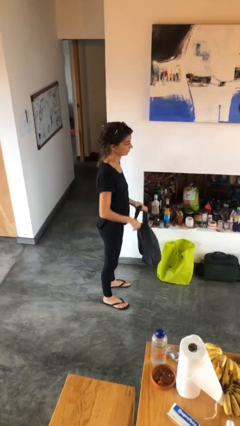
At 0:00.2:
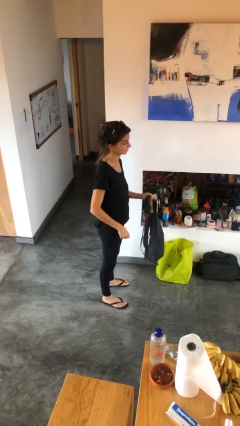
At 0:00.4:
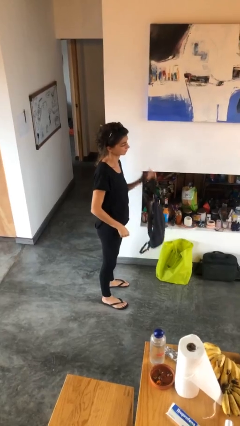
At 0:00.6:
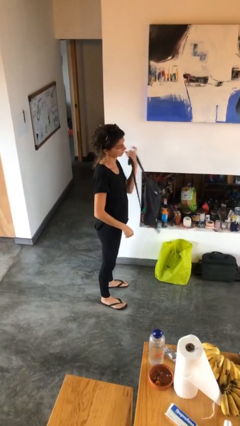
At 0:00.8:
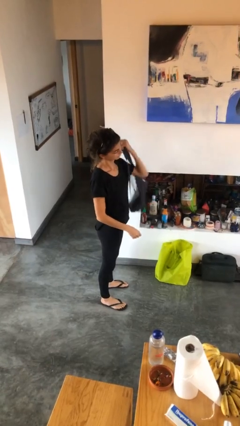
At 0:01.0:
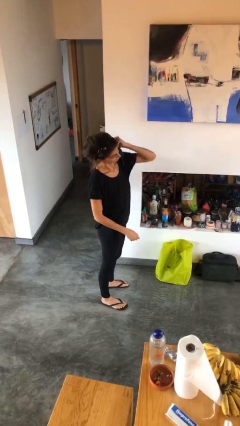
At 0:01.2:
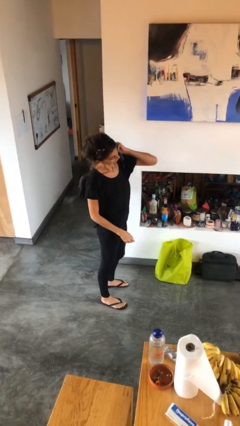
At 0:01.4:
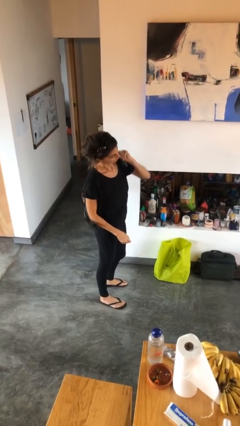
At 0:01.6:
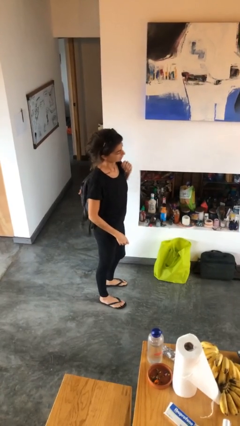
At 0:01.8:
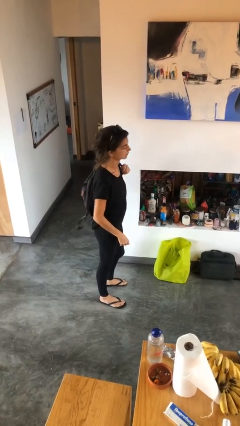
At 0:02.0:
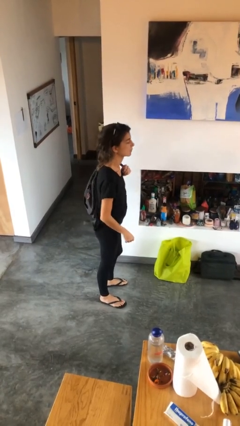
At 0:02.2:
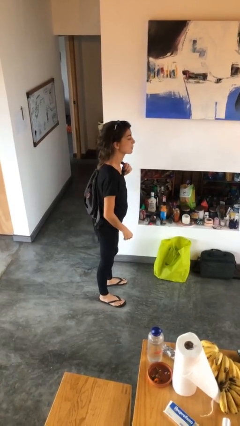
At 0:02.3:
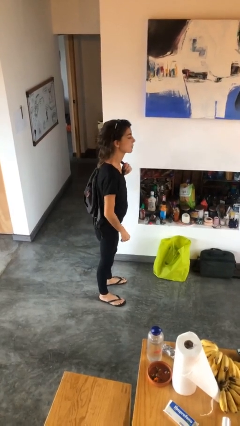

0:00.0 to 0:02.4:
person puts on backpack

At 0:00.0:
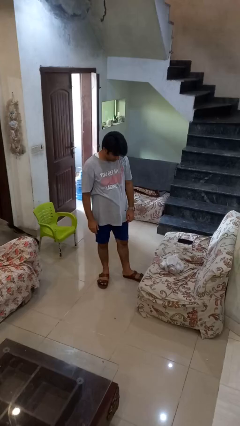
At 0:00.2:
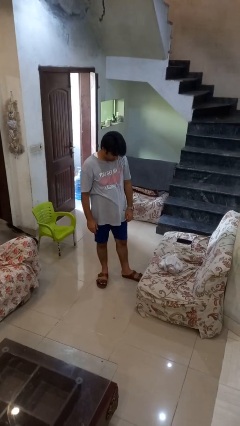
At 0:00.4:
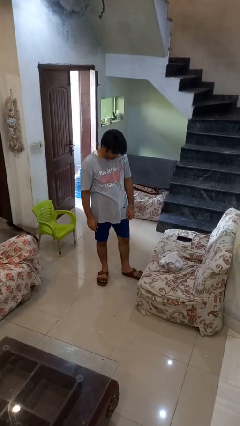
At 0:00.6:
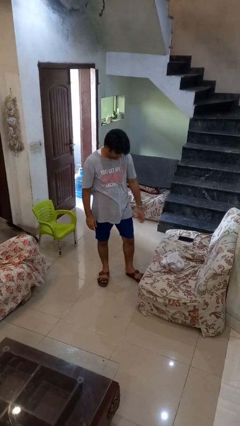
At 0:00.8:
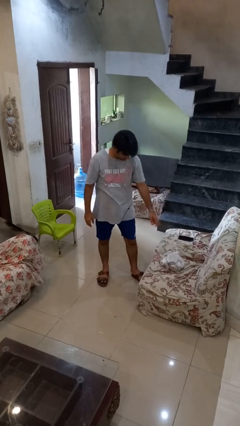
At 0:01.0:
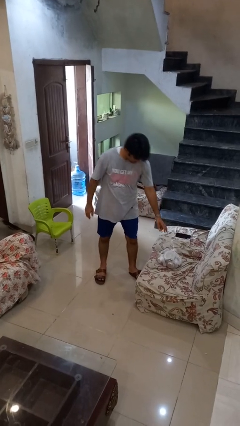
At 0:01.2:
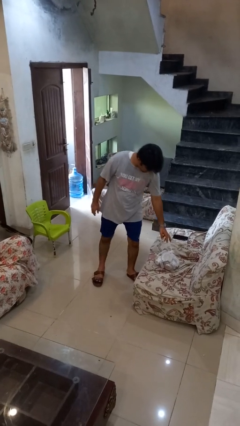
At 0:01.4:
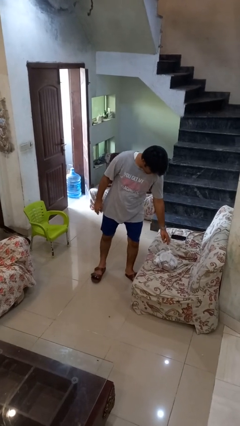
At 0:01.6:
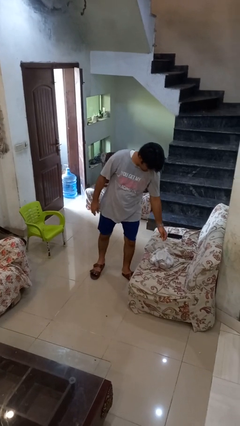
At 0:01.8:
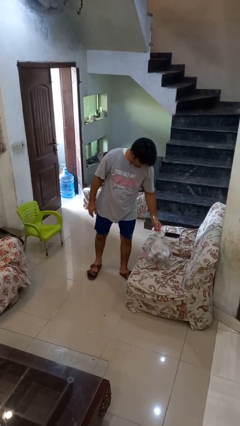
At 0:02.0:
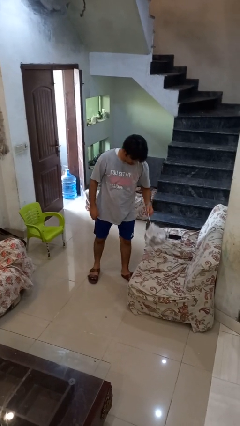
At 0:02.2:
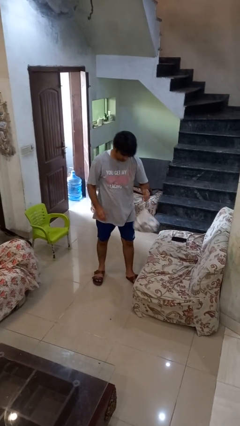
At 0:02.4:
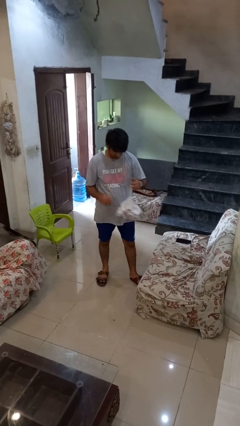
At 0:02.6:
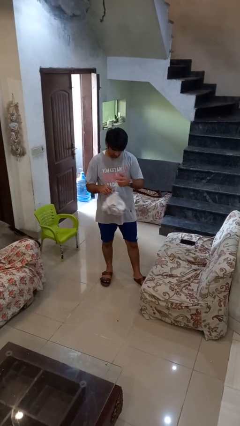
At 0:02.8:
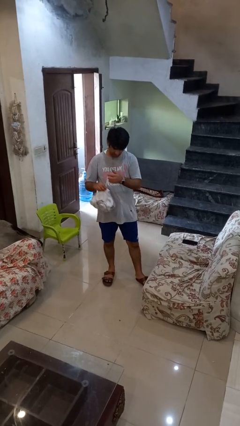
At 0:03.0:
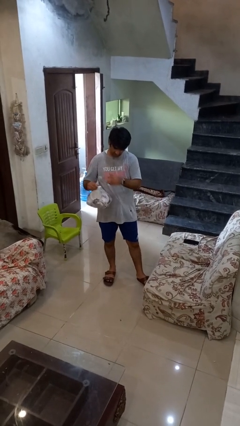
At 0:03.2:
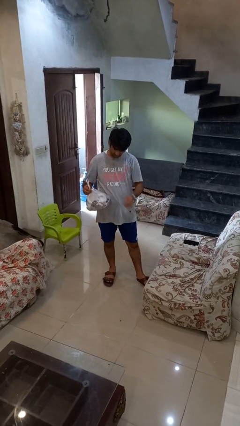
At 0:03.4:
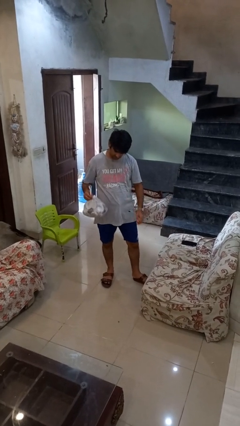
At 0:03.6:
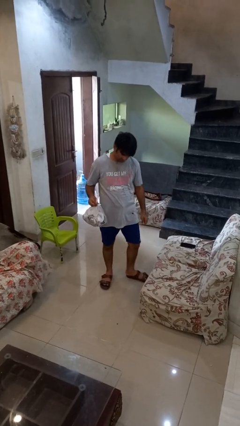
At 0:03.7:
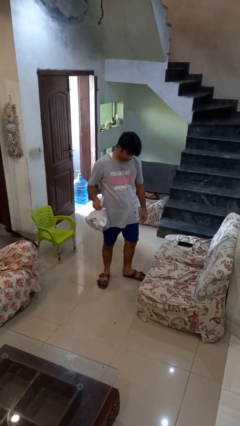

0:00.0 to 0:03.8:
person picks up object from couch

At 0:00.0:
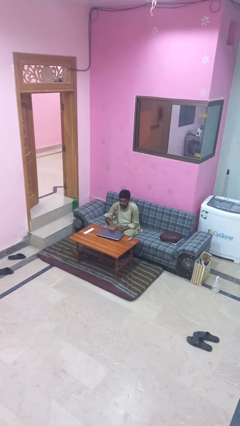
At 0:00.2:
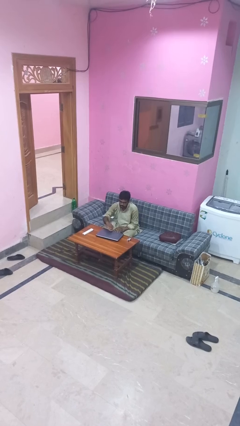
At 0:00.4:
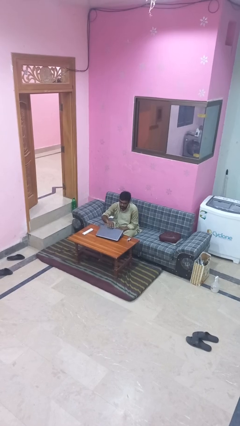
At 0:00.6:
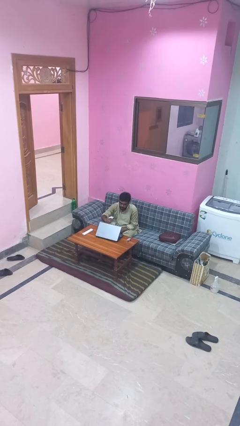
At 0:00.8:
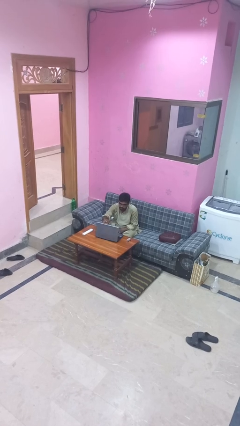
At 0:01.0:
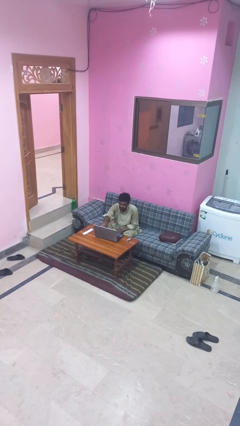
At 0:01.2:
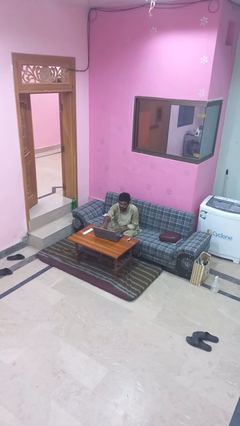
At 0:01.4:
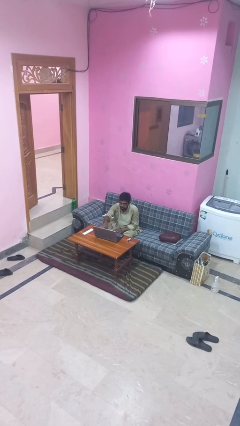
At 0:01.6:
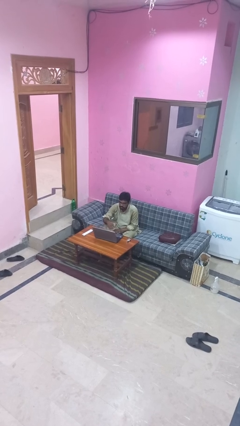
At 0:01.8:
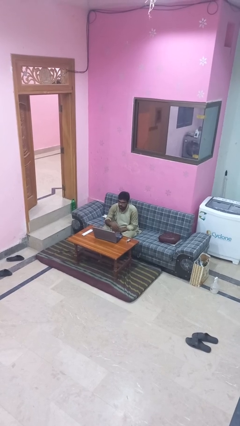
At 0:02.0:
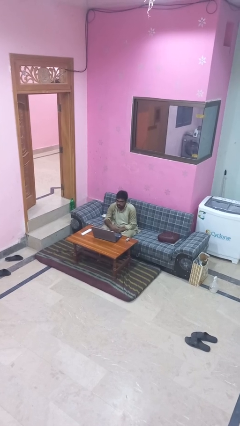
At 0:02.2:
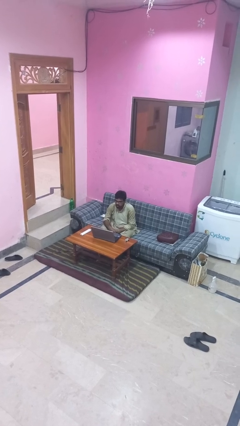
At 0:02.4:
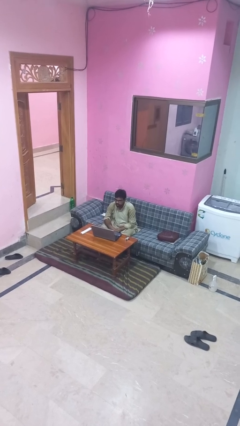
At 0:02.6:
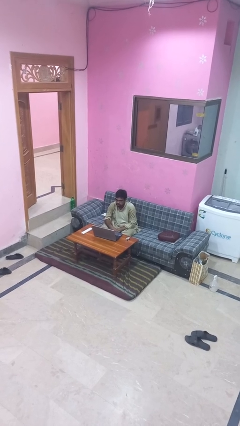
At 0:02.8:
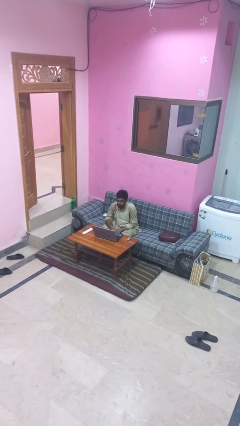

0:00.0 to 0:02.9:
person opens laptop

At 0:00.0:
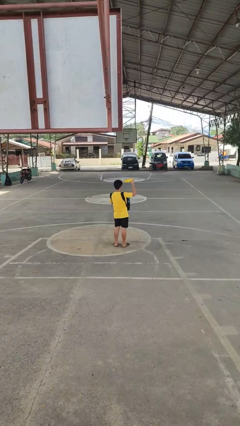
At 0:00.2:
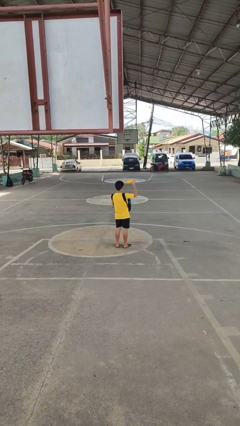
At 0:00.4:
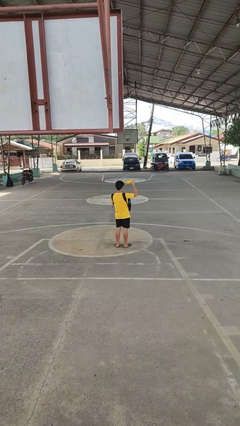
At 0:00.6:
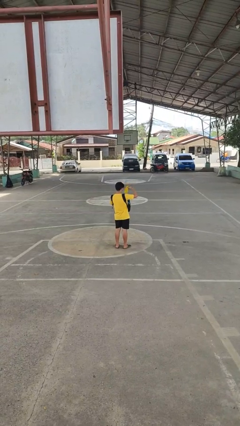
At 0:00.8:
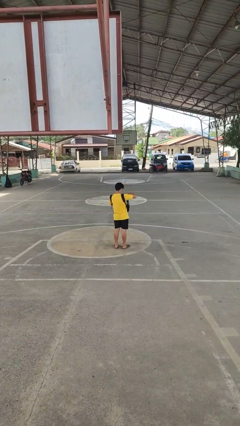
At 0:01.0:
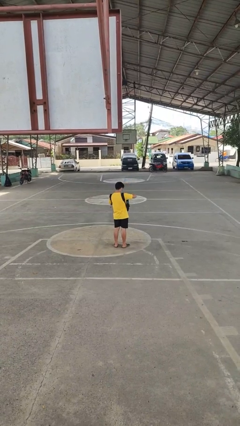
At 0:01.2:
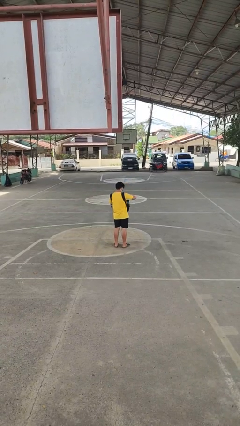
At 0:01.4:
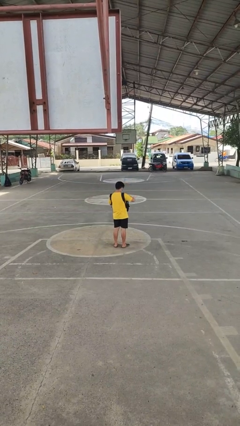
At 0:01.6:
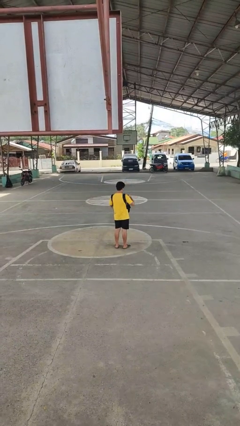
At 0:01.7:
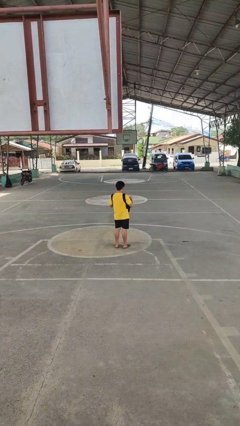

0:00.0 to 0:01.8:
person puts object into backpack

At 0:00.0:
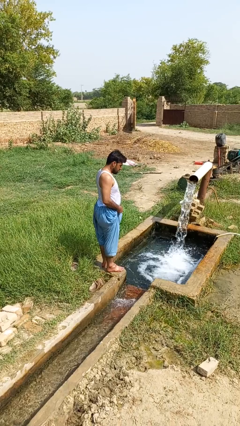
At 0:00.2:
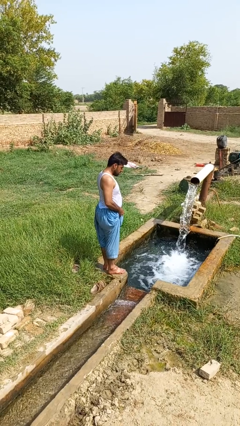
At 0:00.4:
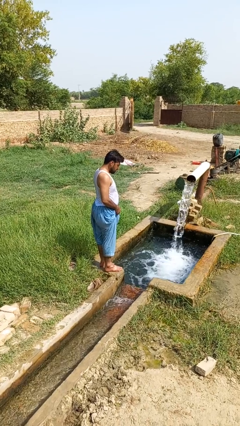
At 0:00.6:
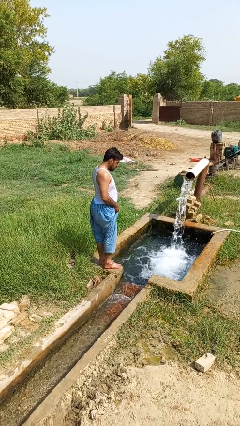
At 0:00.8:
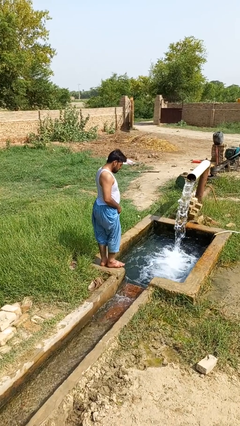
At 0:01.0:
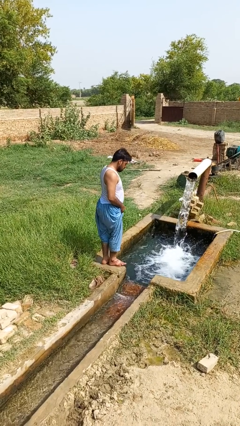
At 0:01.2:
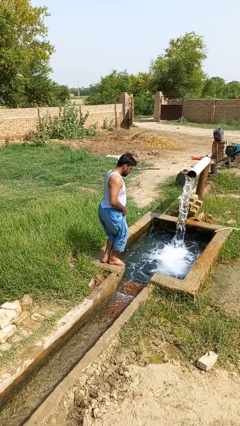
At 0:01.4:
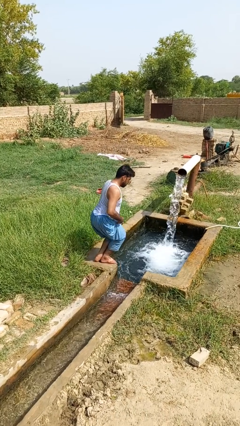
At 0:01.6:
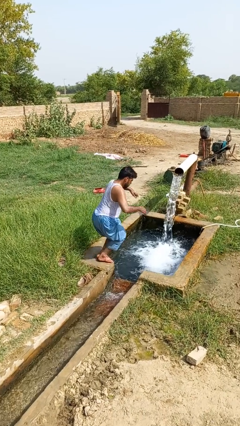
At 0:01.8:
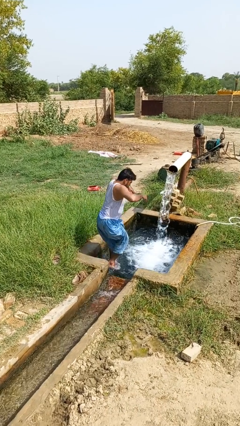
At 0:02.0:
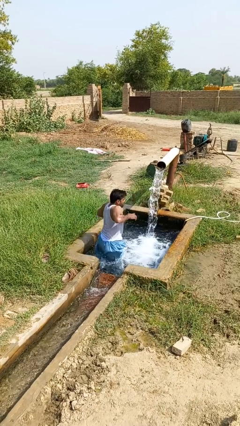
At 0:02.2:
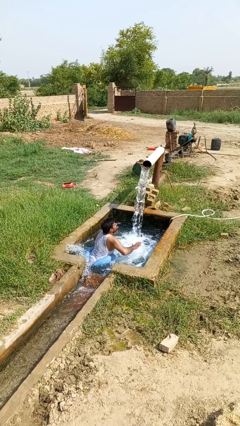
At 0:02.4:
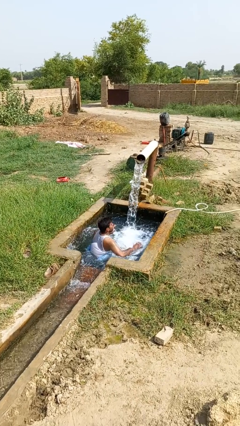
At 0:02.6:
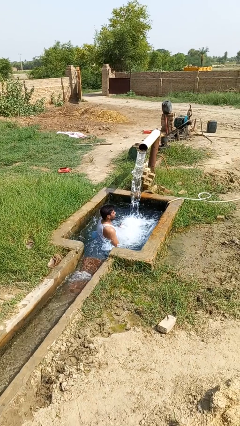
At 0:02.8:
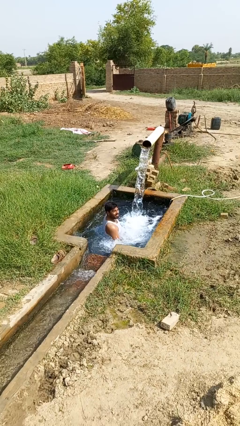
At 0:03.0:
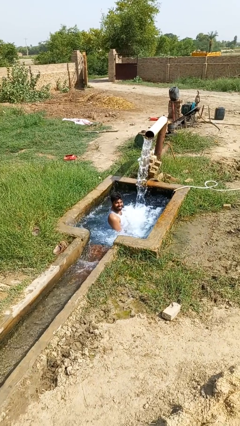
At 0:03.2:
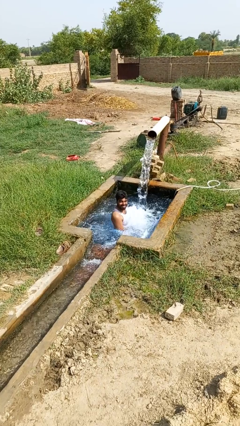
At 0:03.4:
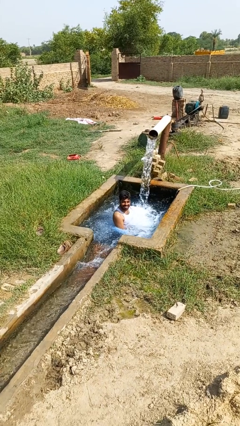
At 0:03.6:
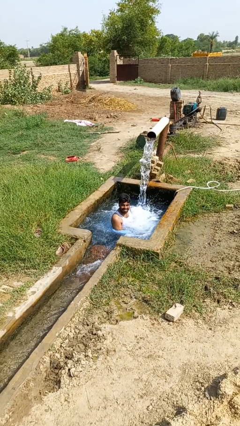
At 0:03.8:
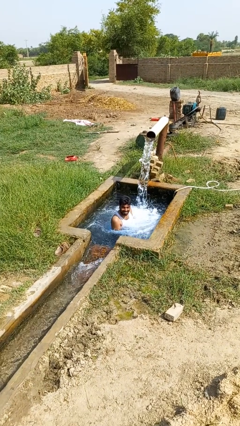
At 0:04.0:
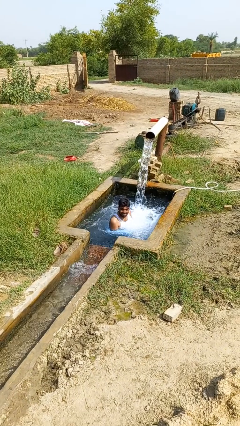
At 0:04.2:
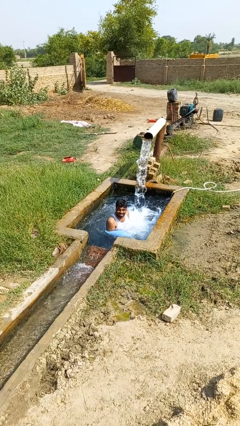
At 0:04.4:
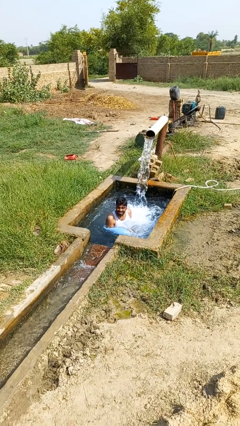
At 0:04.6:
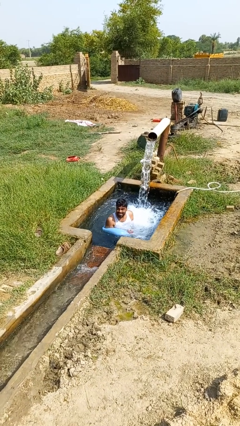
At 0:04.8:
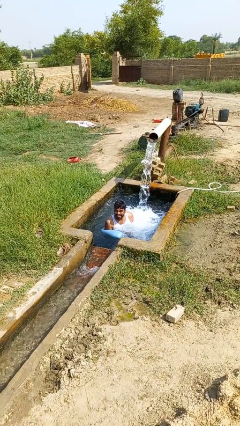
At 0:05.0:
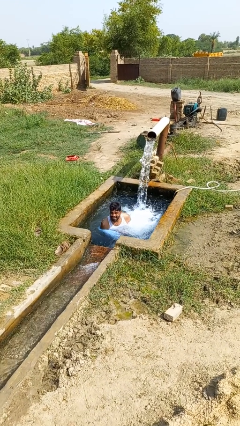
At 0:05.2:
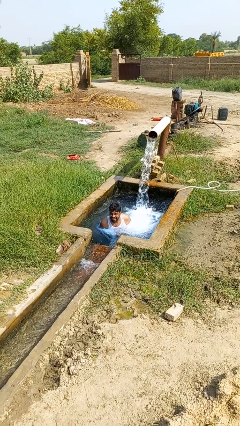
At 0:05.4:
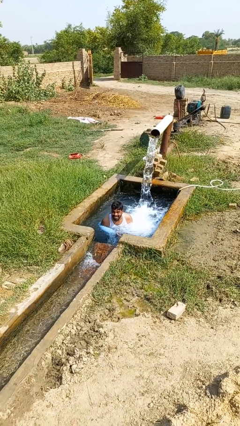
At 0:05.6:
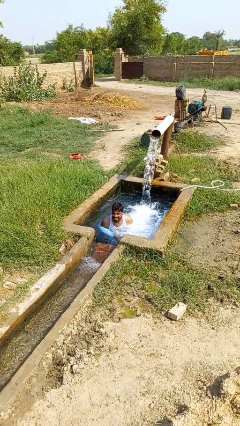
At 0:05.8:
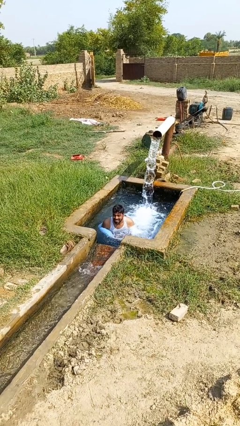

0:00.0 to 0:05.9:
person jumps into pool

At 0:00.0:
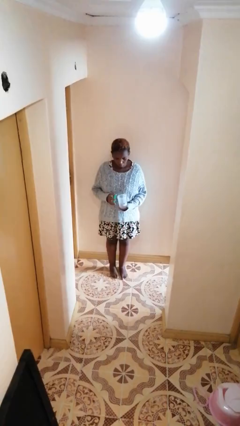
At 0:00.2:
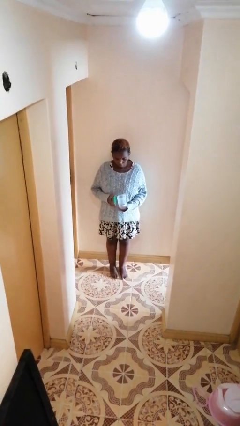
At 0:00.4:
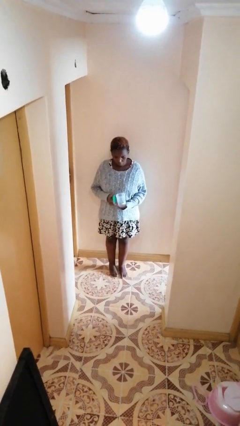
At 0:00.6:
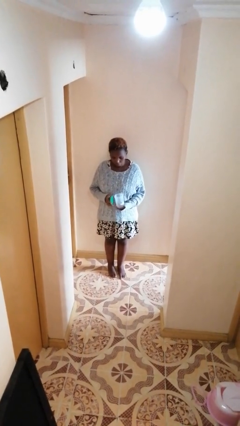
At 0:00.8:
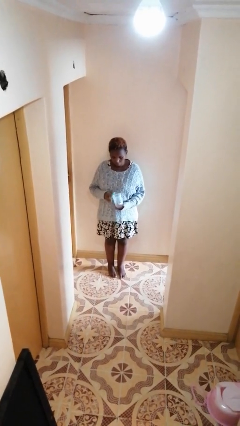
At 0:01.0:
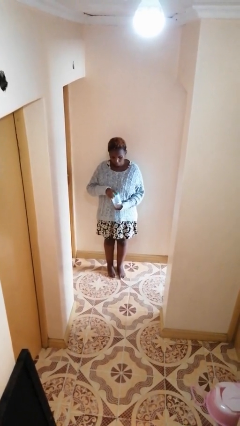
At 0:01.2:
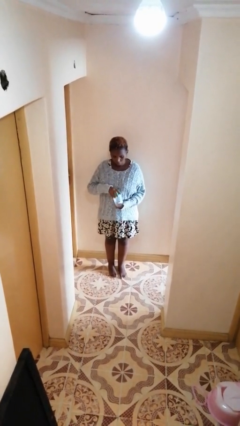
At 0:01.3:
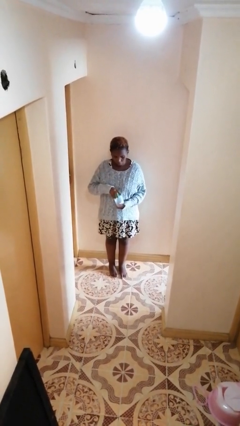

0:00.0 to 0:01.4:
person closes jar
